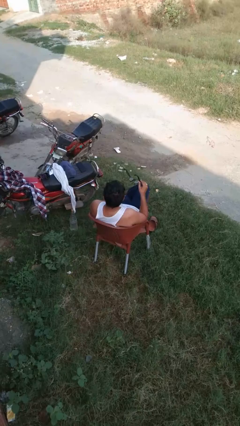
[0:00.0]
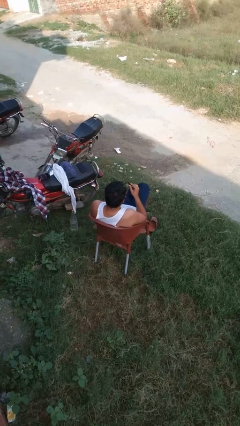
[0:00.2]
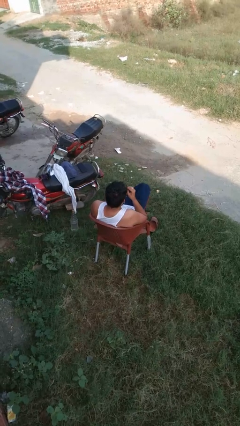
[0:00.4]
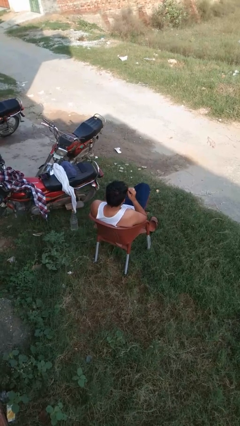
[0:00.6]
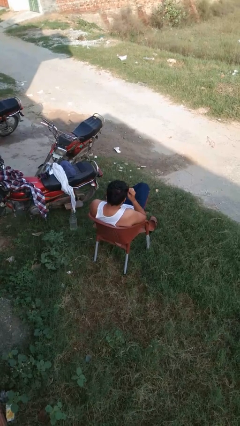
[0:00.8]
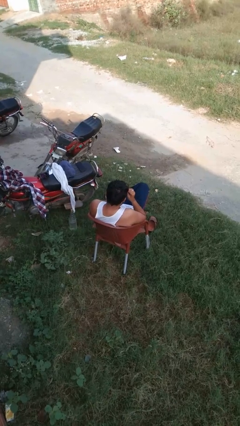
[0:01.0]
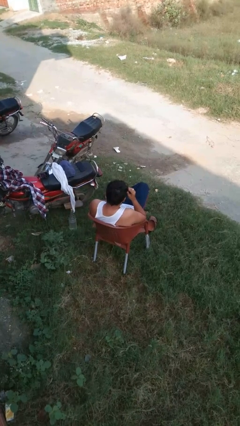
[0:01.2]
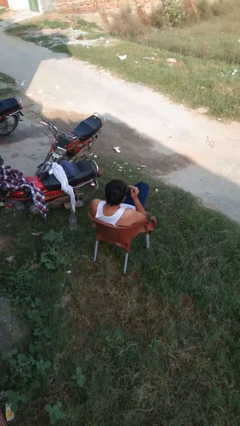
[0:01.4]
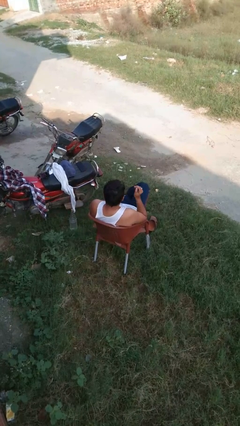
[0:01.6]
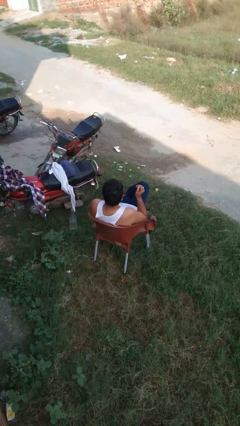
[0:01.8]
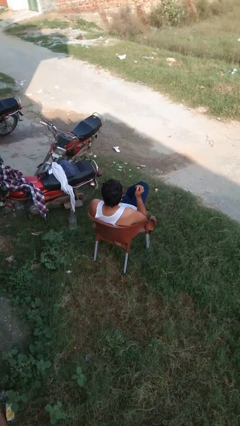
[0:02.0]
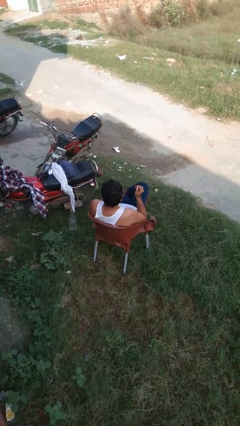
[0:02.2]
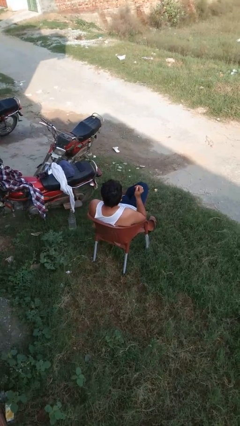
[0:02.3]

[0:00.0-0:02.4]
person puts on glasses

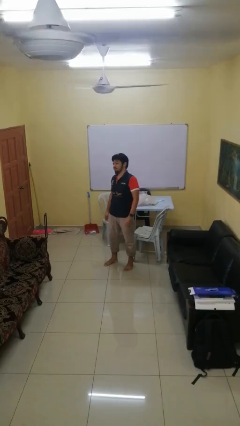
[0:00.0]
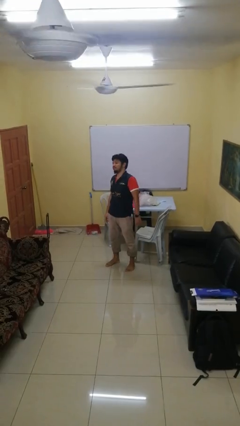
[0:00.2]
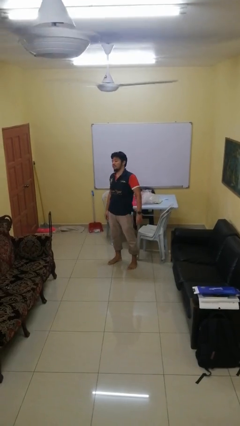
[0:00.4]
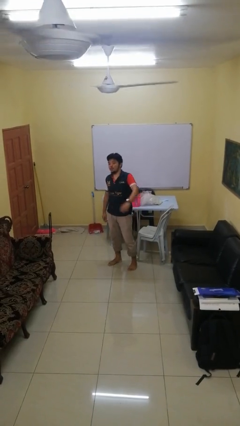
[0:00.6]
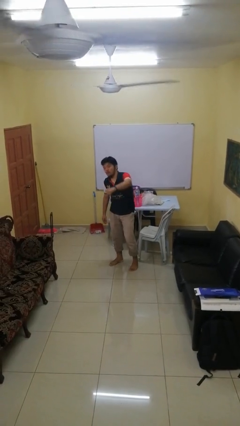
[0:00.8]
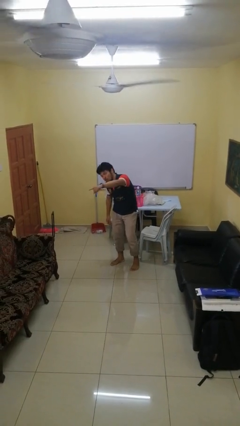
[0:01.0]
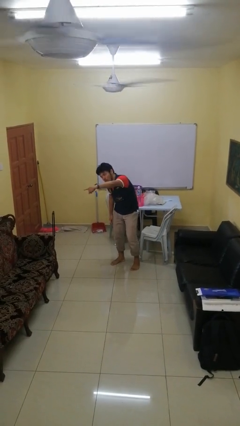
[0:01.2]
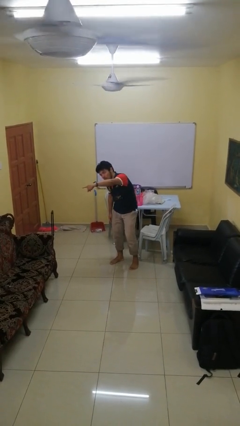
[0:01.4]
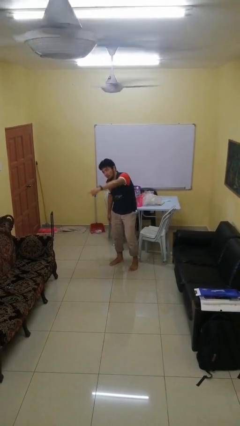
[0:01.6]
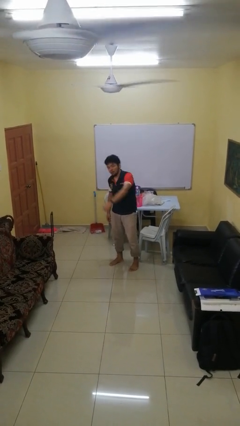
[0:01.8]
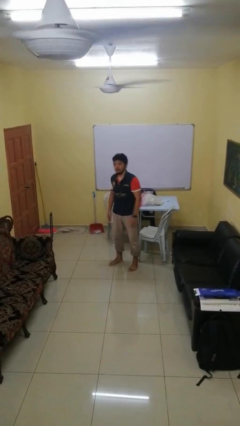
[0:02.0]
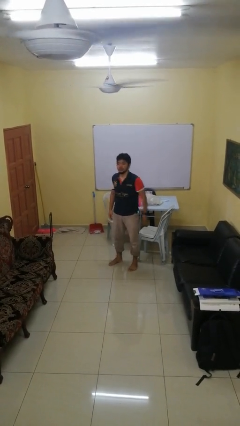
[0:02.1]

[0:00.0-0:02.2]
person points at person

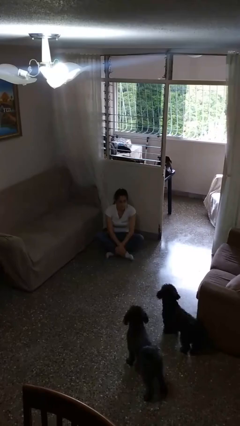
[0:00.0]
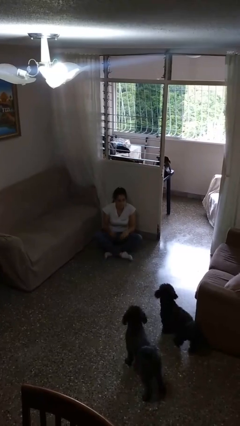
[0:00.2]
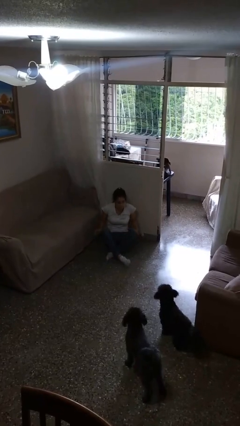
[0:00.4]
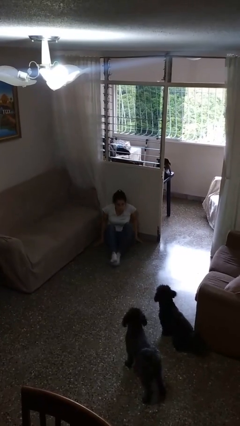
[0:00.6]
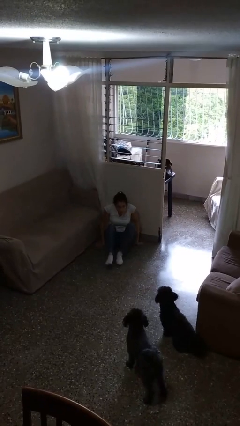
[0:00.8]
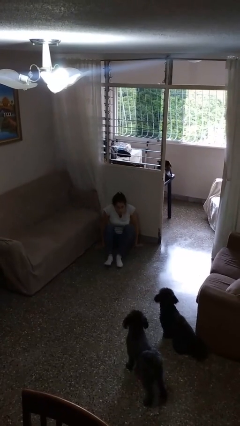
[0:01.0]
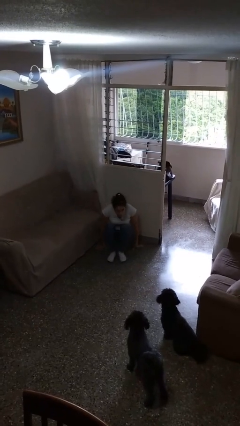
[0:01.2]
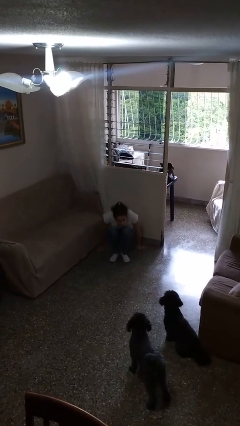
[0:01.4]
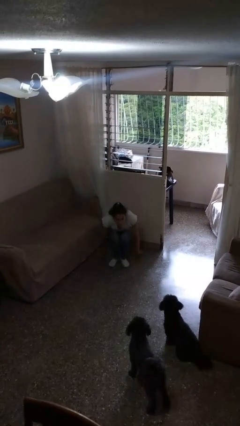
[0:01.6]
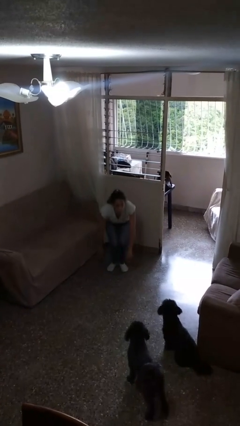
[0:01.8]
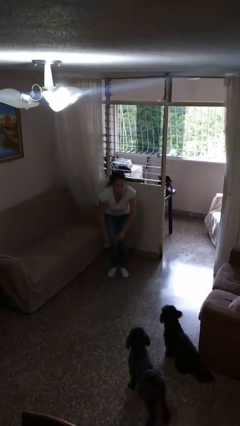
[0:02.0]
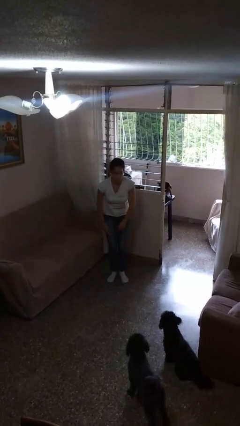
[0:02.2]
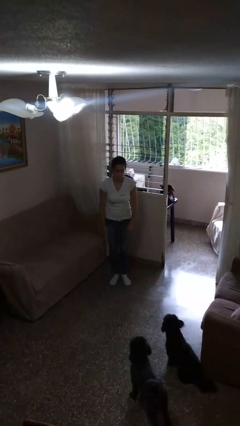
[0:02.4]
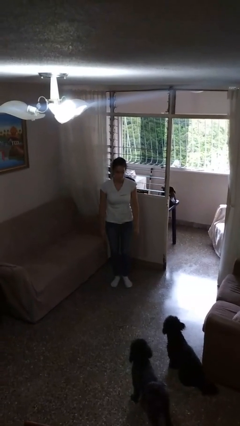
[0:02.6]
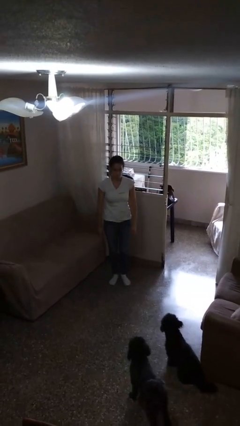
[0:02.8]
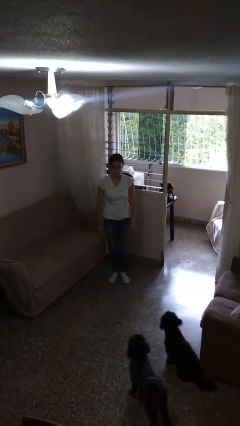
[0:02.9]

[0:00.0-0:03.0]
person stands up from floor

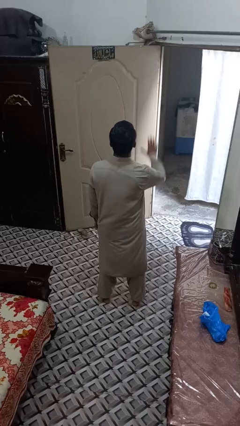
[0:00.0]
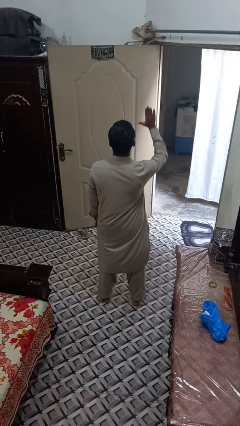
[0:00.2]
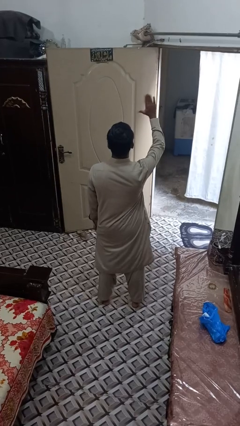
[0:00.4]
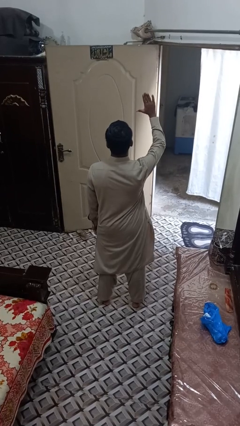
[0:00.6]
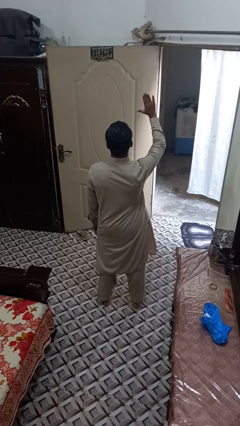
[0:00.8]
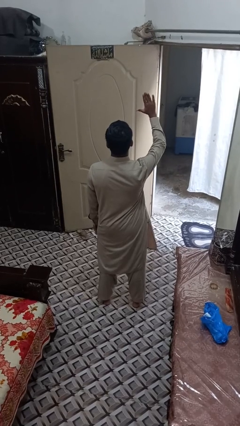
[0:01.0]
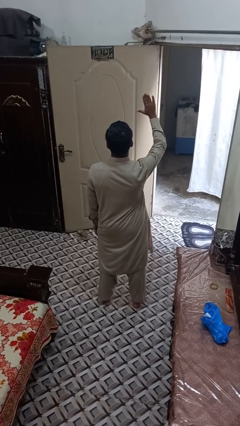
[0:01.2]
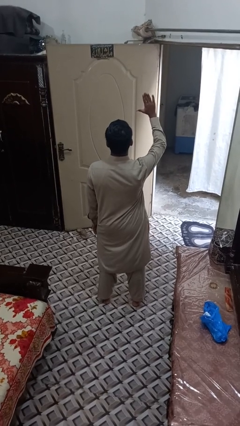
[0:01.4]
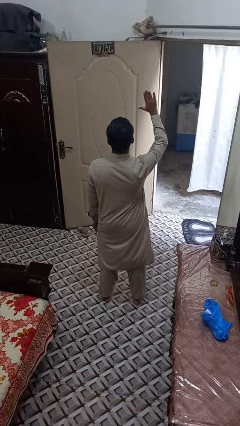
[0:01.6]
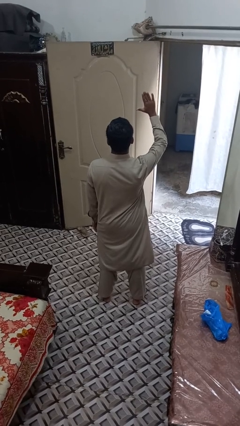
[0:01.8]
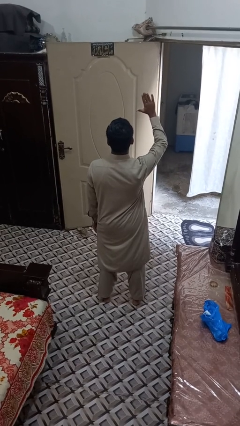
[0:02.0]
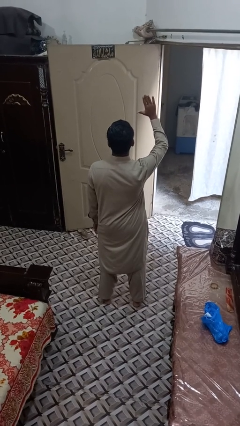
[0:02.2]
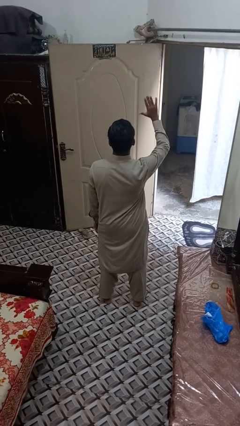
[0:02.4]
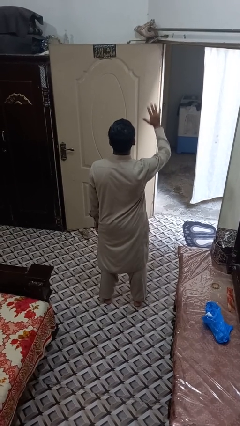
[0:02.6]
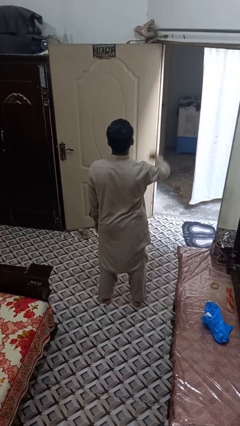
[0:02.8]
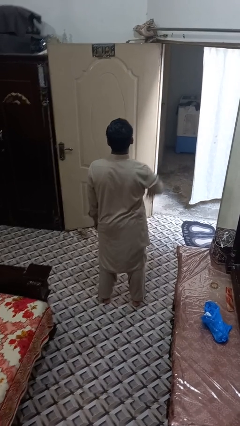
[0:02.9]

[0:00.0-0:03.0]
person gestures number five

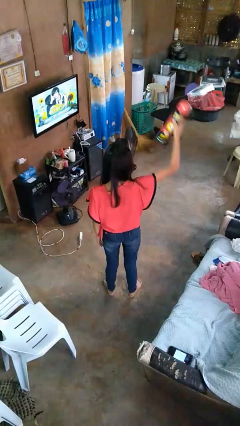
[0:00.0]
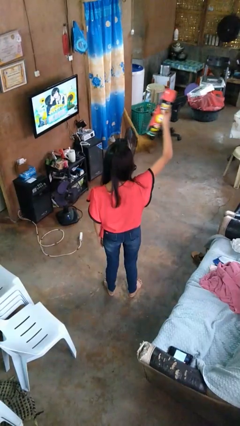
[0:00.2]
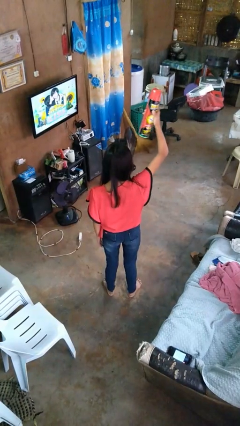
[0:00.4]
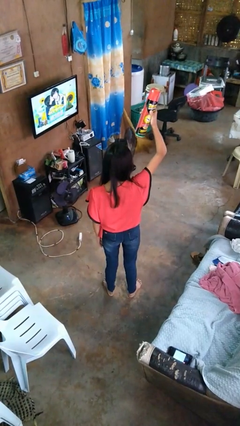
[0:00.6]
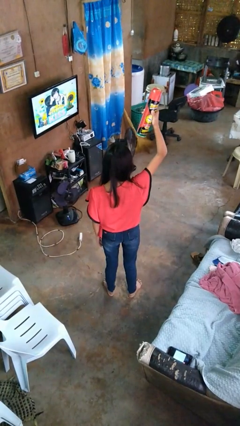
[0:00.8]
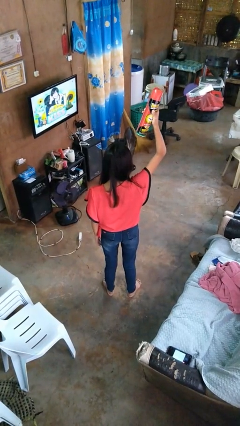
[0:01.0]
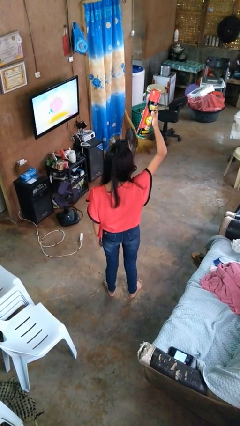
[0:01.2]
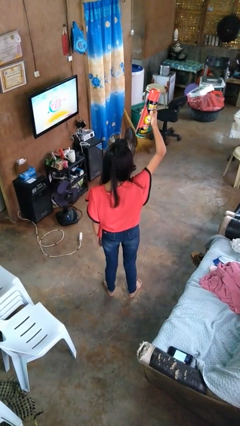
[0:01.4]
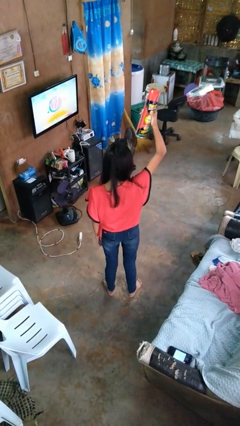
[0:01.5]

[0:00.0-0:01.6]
person holds object above head

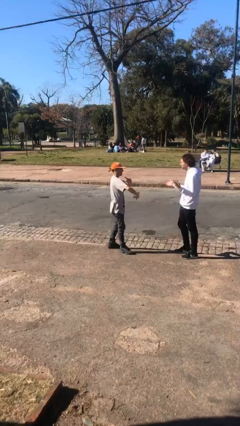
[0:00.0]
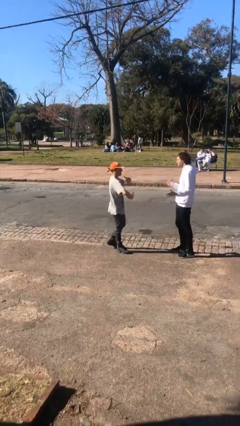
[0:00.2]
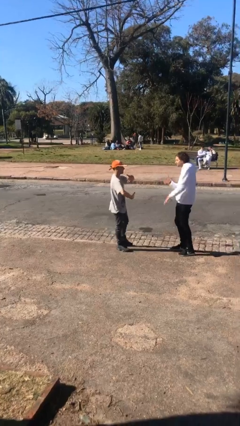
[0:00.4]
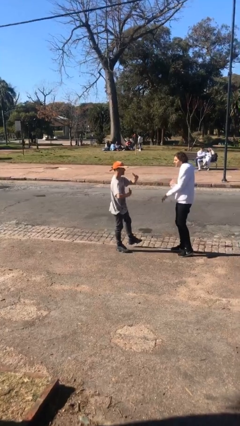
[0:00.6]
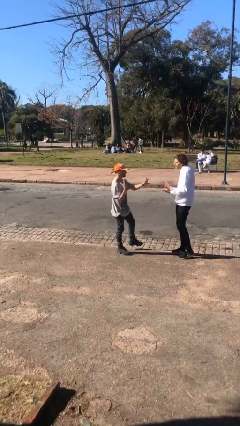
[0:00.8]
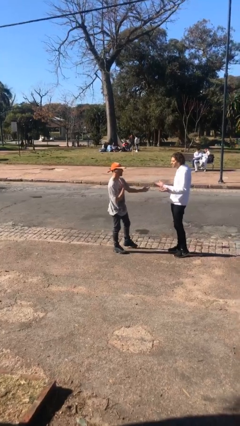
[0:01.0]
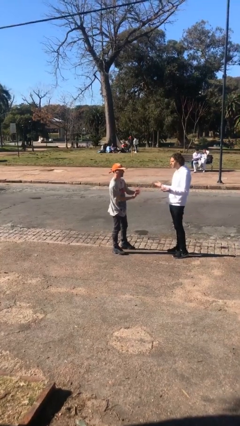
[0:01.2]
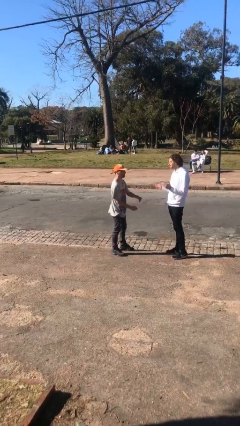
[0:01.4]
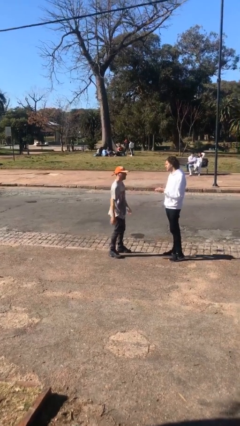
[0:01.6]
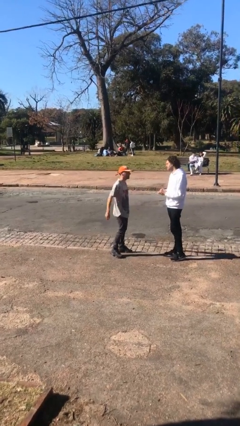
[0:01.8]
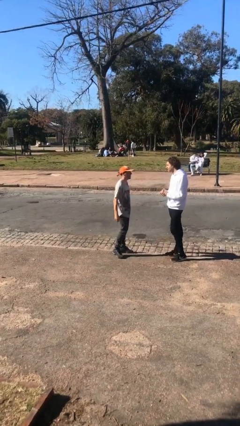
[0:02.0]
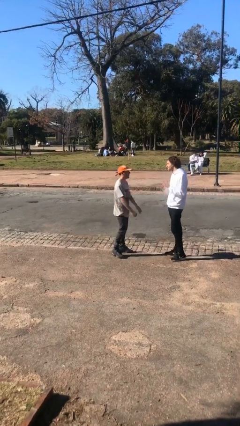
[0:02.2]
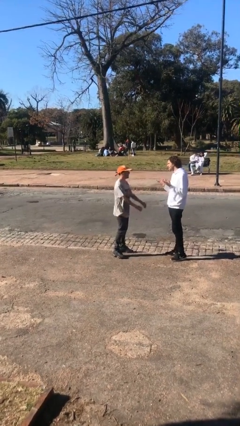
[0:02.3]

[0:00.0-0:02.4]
person talks to person

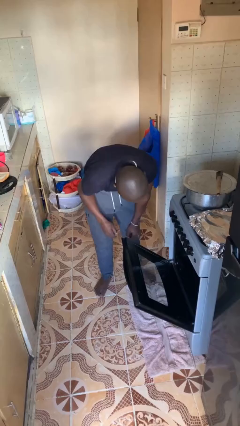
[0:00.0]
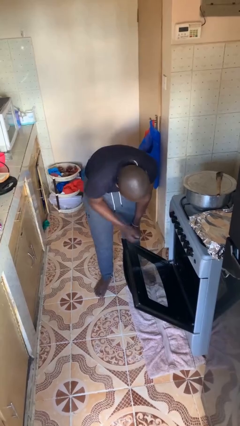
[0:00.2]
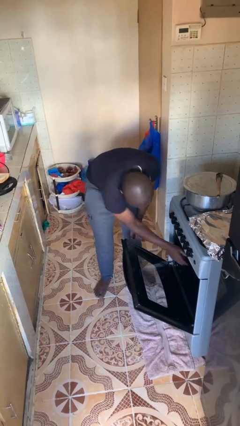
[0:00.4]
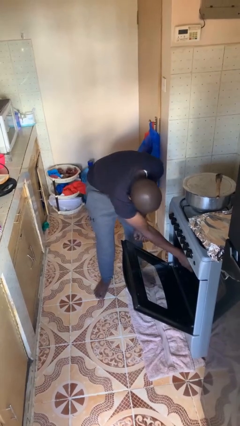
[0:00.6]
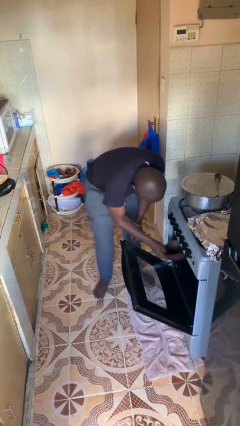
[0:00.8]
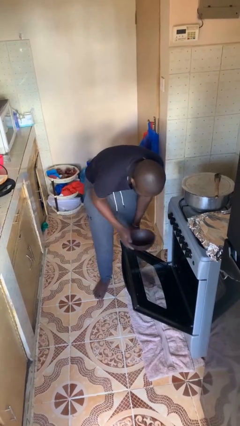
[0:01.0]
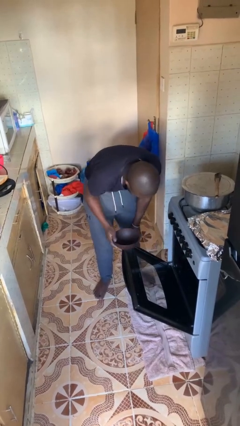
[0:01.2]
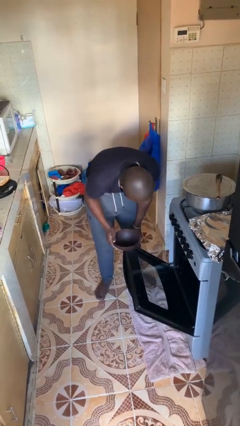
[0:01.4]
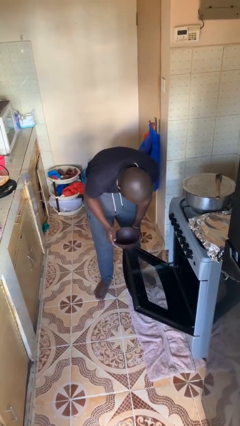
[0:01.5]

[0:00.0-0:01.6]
person takes object from oven

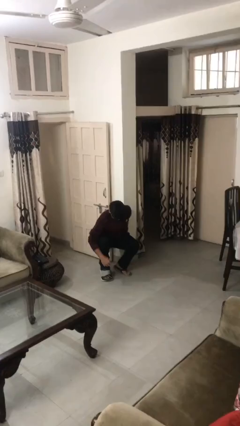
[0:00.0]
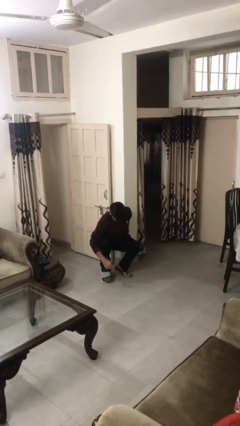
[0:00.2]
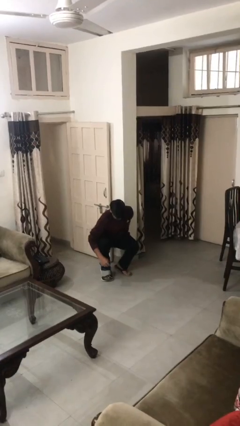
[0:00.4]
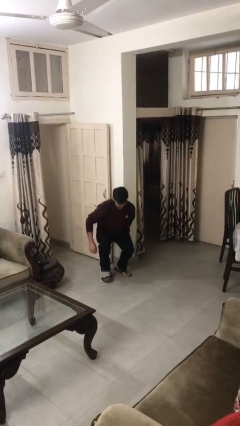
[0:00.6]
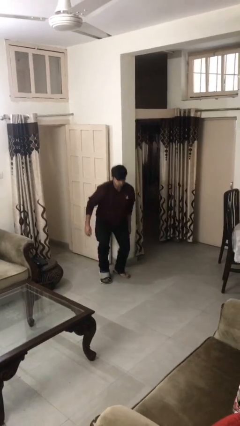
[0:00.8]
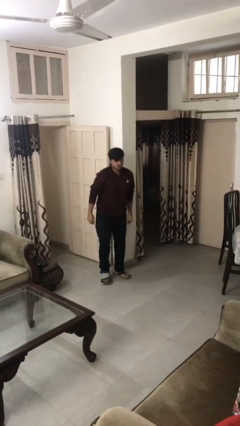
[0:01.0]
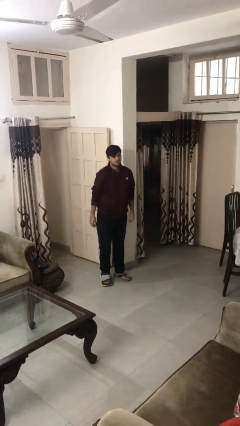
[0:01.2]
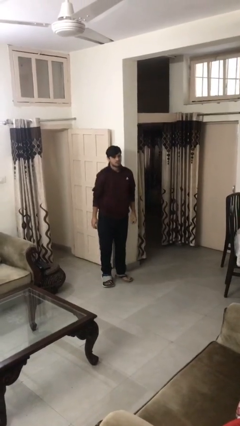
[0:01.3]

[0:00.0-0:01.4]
person stands up
